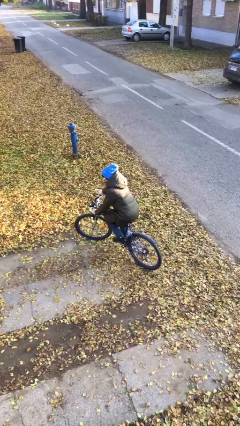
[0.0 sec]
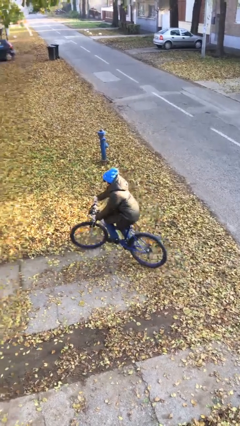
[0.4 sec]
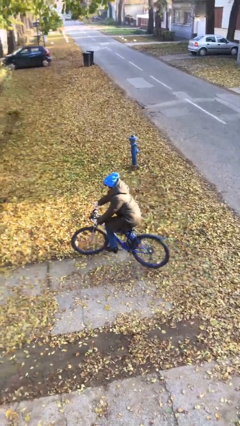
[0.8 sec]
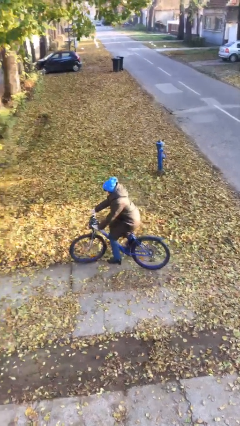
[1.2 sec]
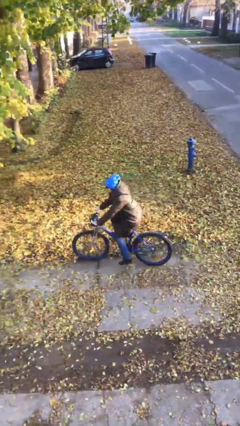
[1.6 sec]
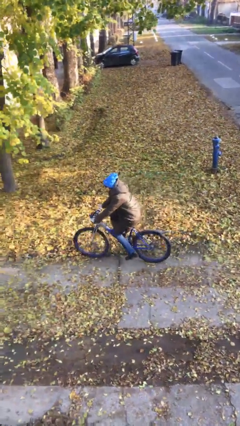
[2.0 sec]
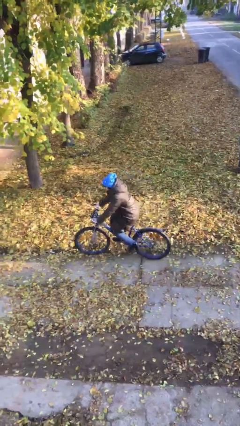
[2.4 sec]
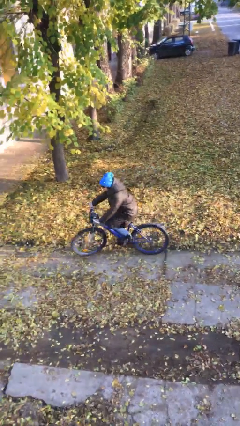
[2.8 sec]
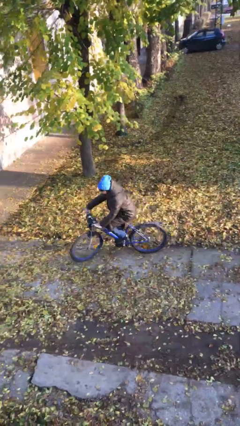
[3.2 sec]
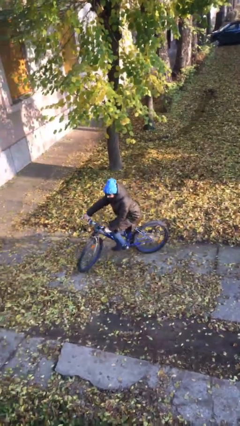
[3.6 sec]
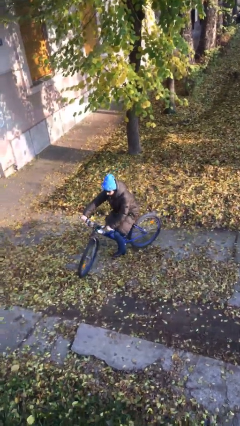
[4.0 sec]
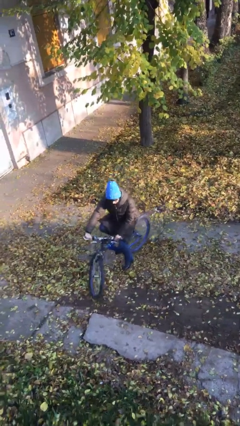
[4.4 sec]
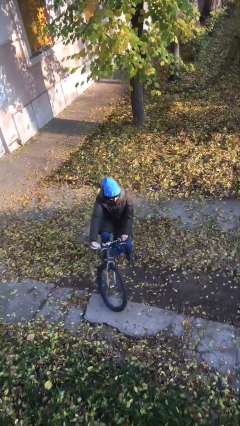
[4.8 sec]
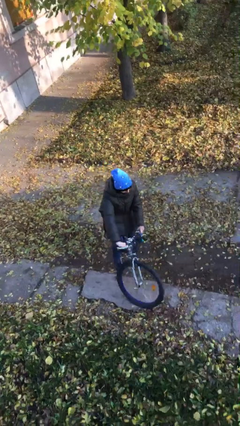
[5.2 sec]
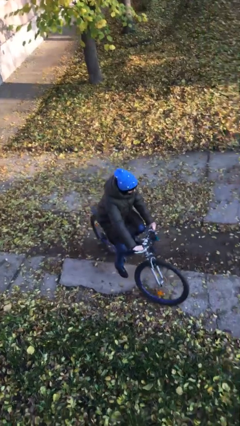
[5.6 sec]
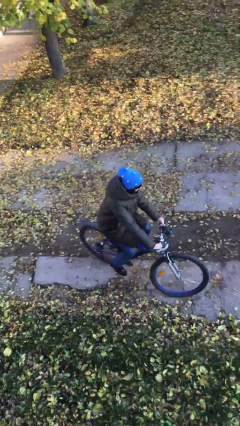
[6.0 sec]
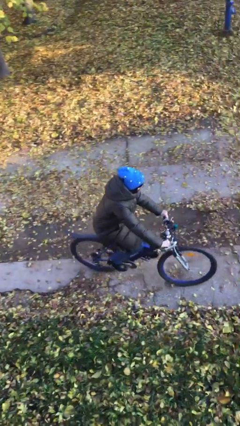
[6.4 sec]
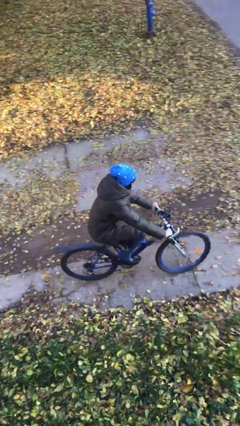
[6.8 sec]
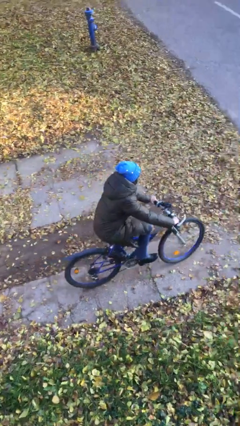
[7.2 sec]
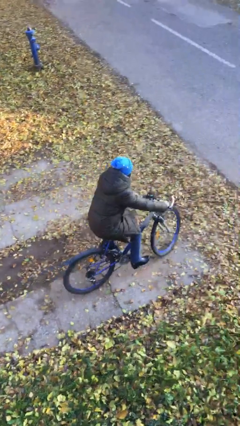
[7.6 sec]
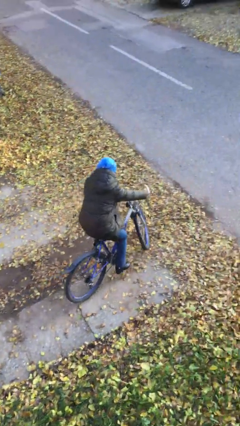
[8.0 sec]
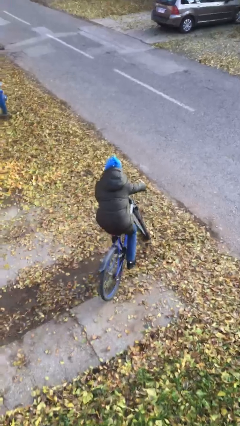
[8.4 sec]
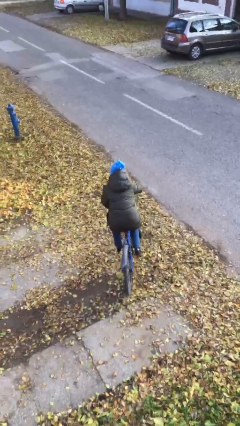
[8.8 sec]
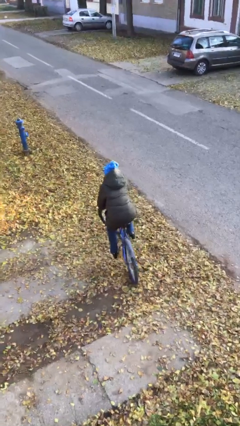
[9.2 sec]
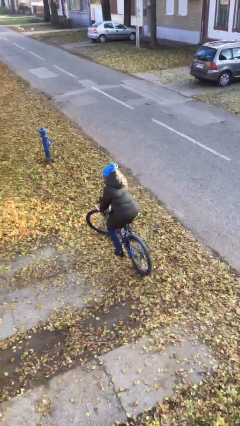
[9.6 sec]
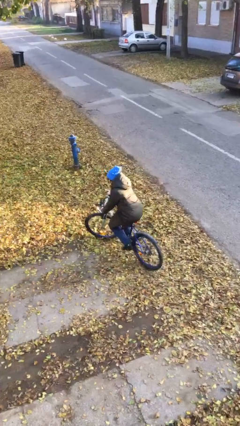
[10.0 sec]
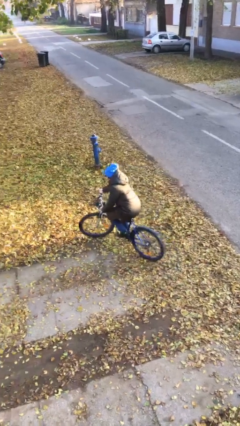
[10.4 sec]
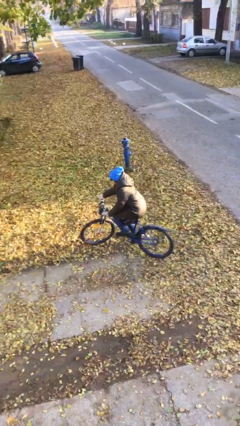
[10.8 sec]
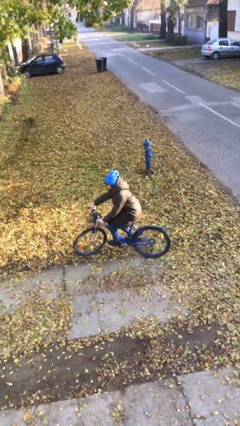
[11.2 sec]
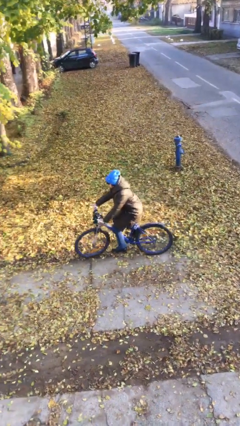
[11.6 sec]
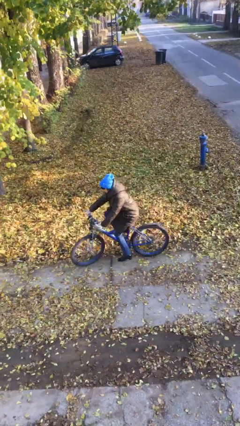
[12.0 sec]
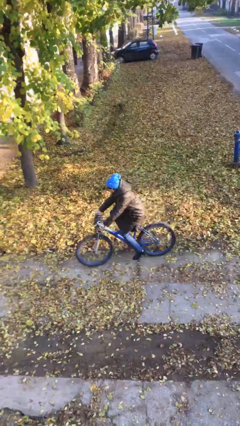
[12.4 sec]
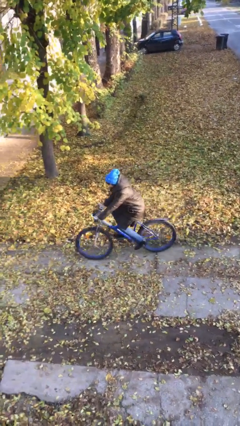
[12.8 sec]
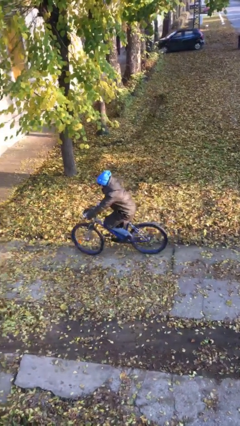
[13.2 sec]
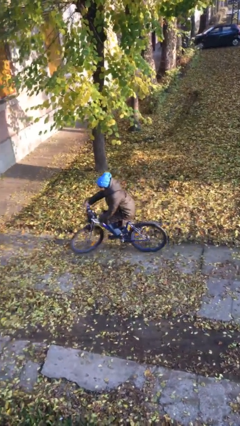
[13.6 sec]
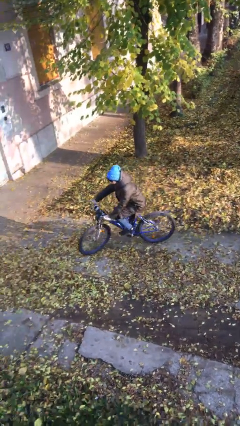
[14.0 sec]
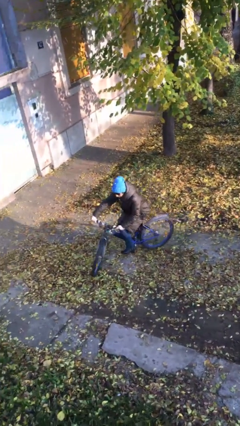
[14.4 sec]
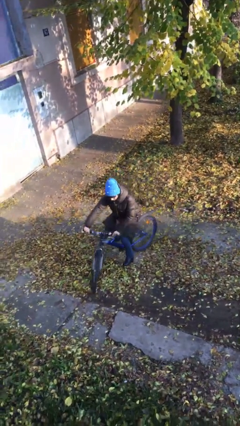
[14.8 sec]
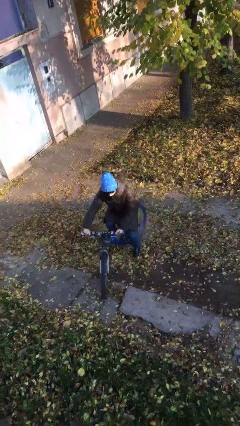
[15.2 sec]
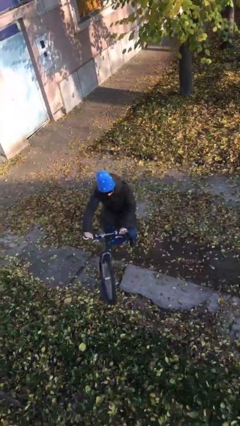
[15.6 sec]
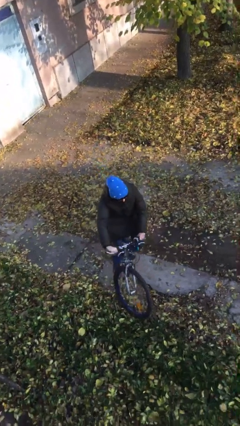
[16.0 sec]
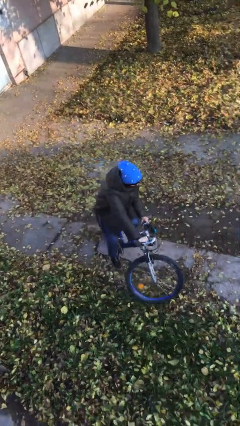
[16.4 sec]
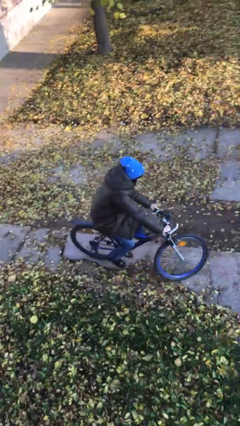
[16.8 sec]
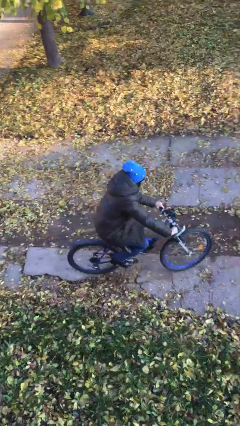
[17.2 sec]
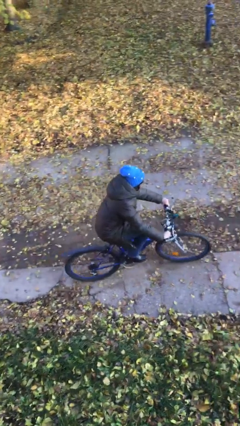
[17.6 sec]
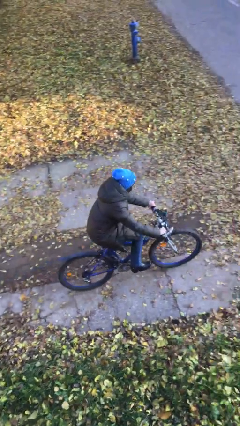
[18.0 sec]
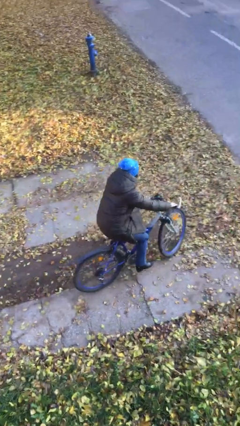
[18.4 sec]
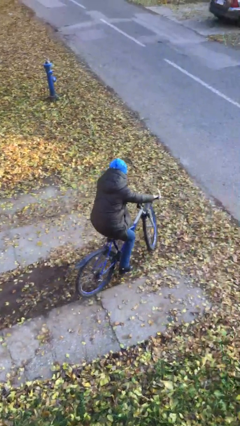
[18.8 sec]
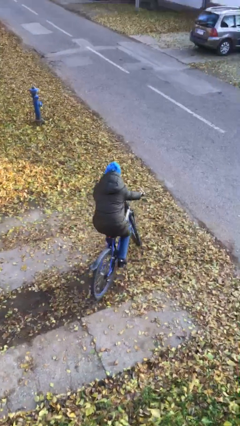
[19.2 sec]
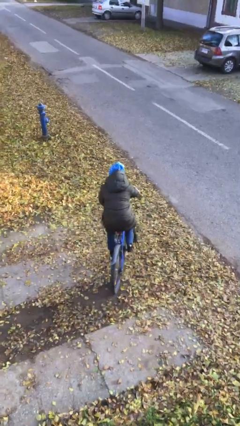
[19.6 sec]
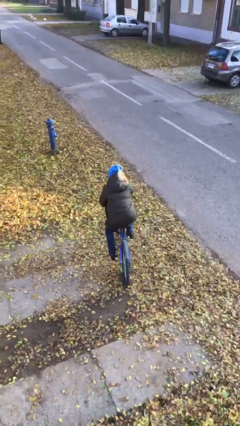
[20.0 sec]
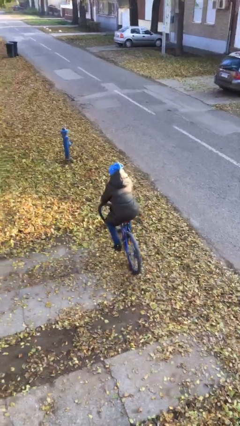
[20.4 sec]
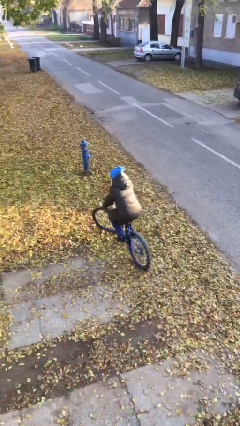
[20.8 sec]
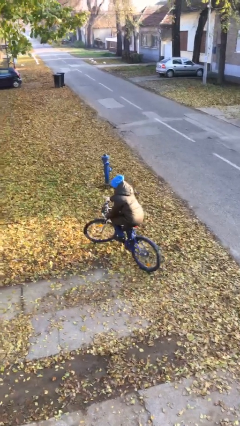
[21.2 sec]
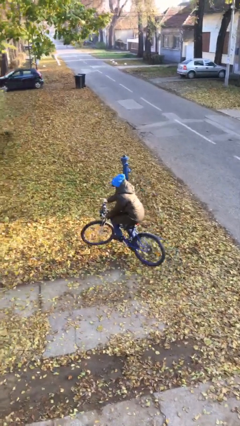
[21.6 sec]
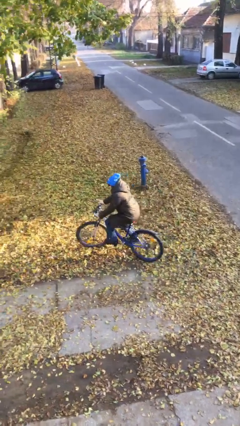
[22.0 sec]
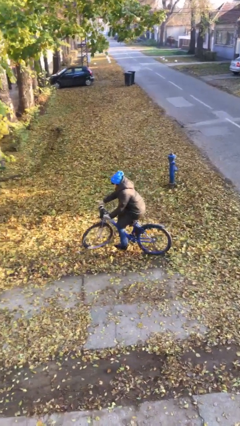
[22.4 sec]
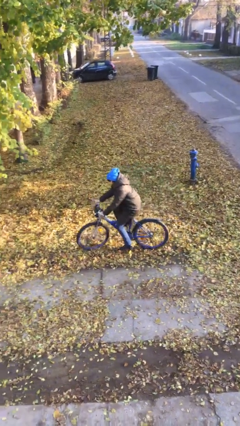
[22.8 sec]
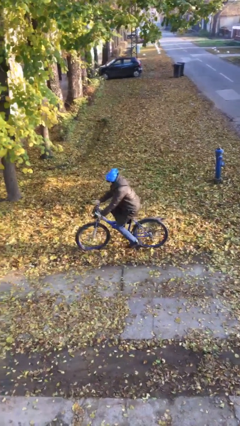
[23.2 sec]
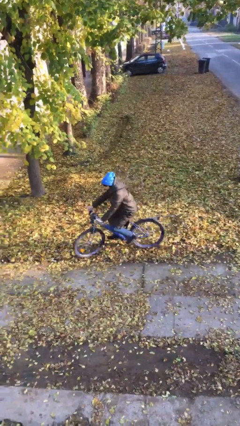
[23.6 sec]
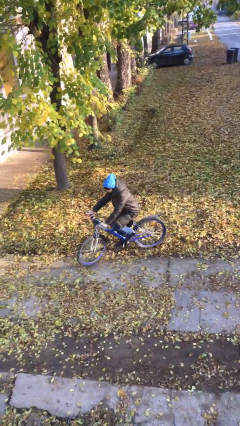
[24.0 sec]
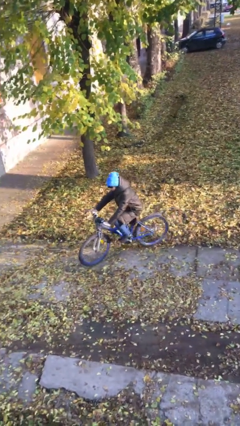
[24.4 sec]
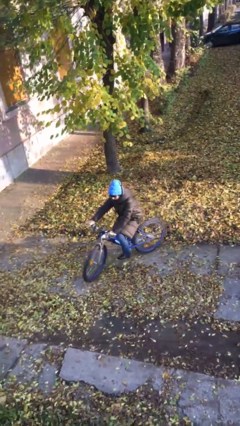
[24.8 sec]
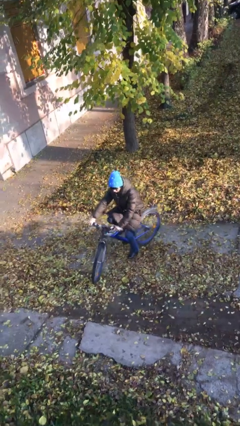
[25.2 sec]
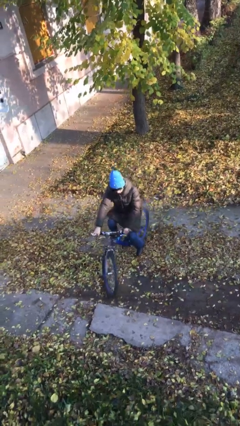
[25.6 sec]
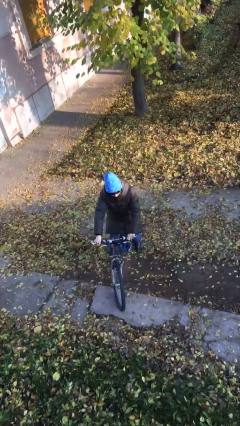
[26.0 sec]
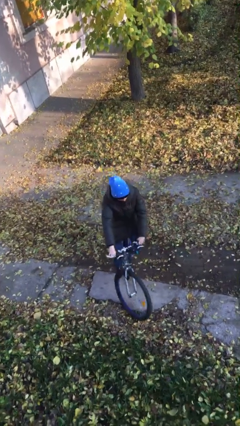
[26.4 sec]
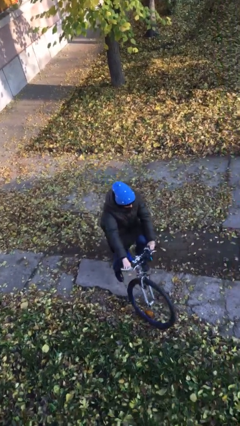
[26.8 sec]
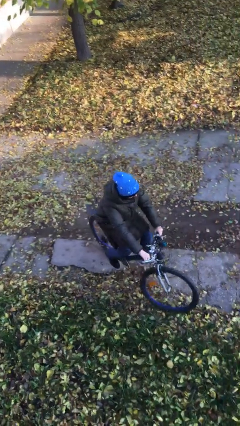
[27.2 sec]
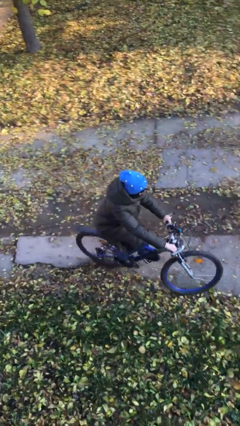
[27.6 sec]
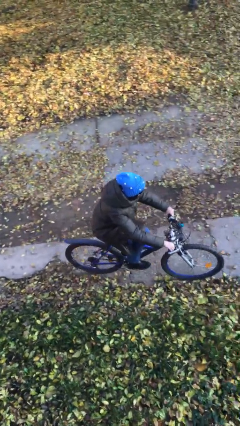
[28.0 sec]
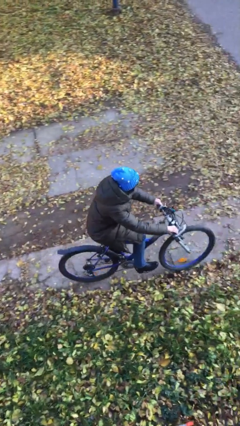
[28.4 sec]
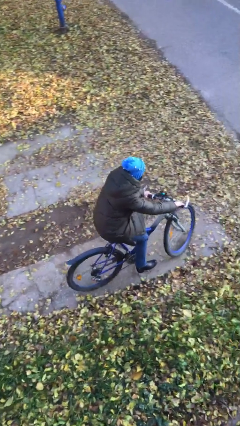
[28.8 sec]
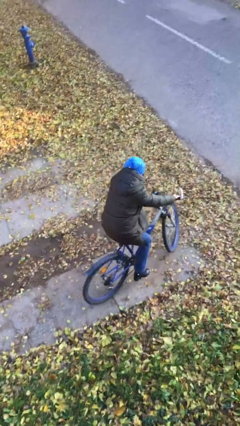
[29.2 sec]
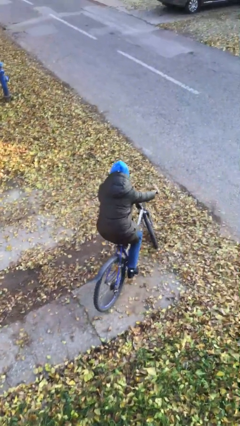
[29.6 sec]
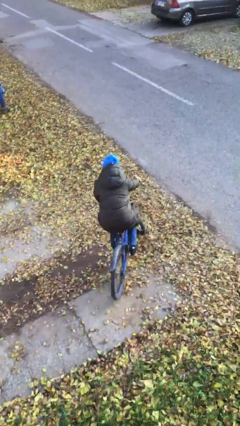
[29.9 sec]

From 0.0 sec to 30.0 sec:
person rides bicycle

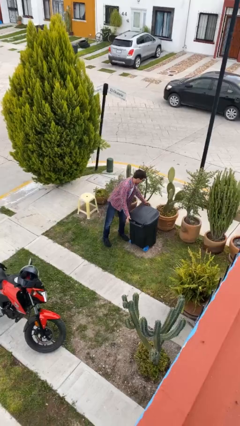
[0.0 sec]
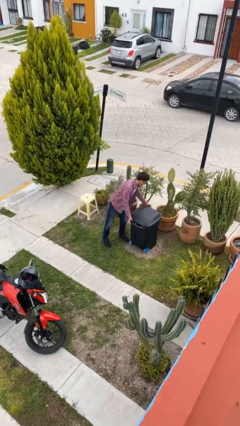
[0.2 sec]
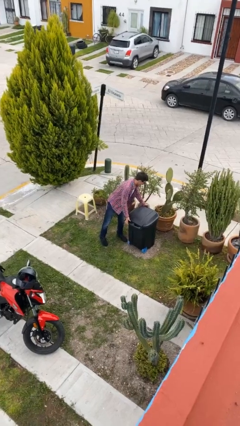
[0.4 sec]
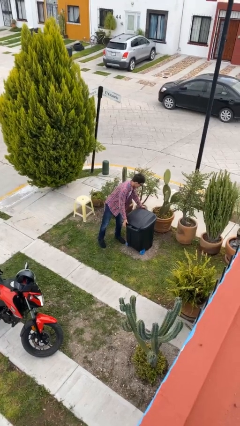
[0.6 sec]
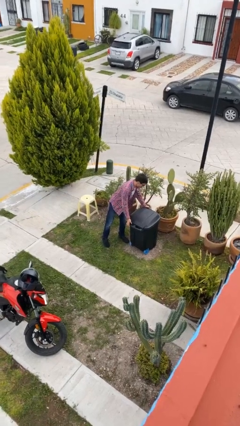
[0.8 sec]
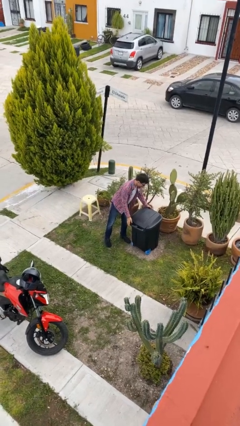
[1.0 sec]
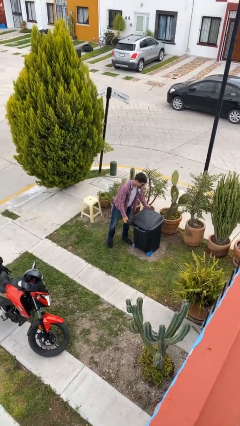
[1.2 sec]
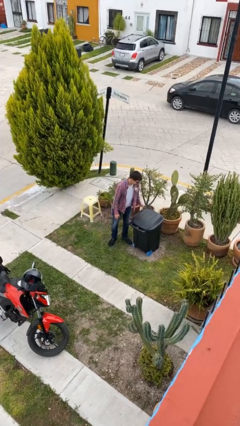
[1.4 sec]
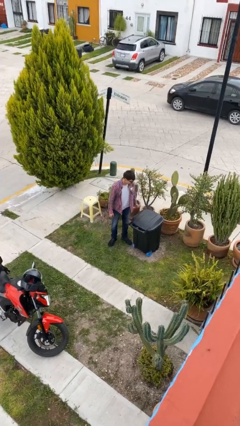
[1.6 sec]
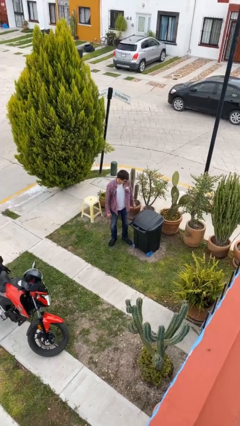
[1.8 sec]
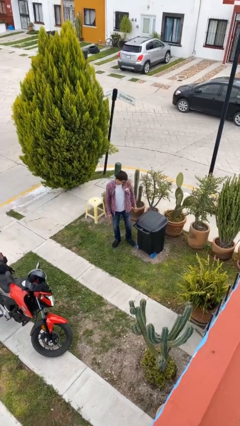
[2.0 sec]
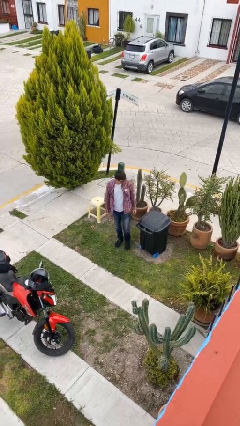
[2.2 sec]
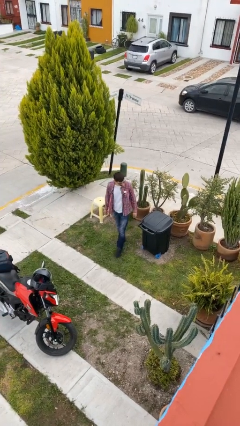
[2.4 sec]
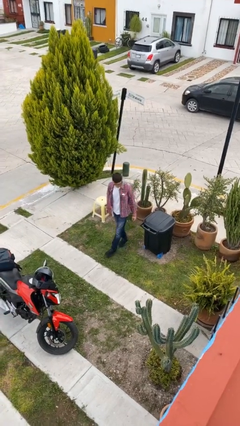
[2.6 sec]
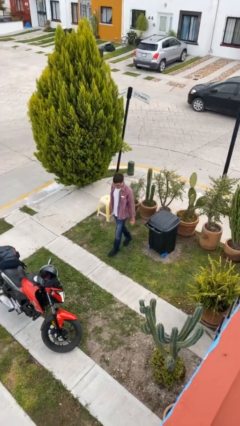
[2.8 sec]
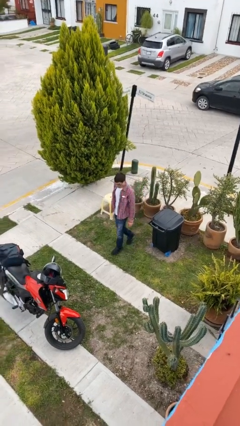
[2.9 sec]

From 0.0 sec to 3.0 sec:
person puts down object on floor
